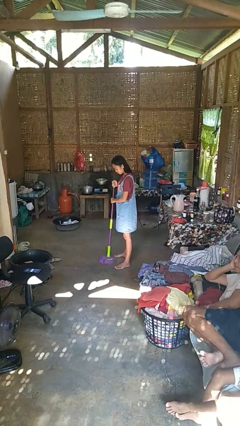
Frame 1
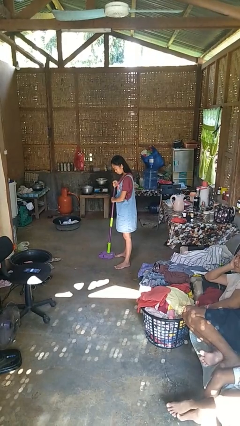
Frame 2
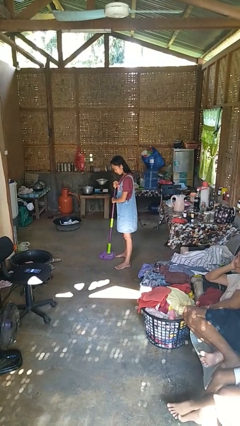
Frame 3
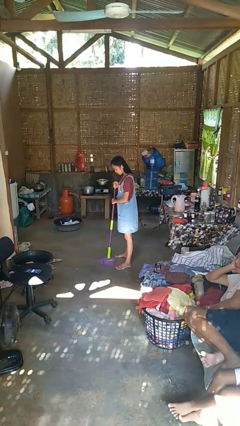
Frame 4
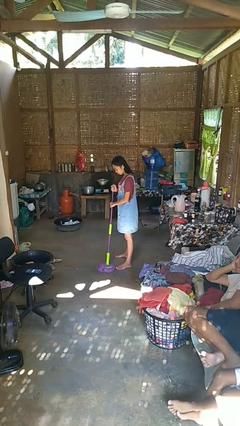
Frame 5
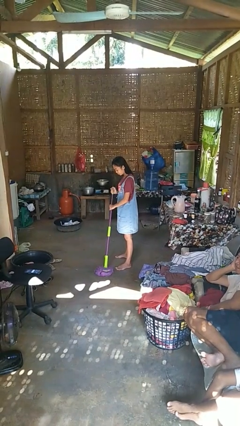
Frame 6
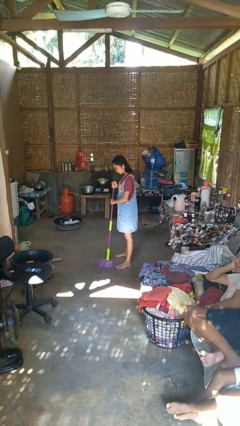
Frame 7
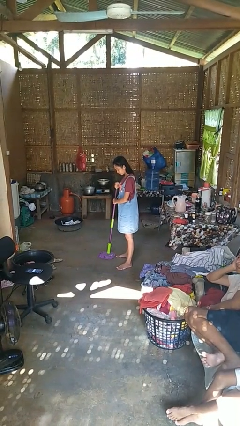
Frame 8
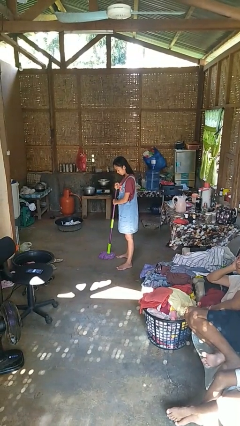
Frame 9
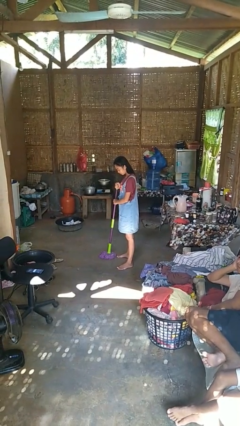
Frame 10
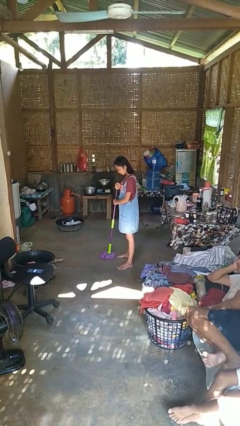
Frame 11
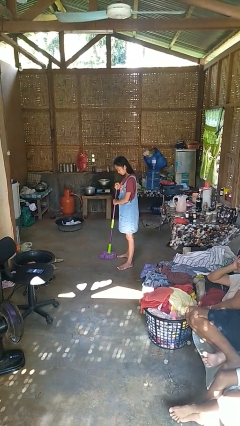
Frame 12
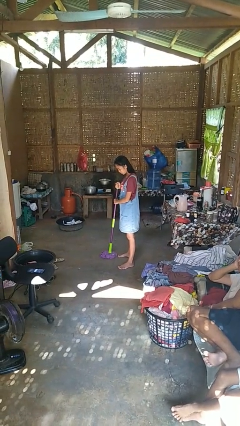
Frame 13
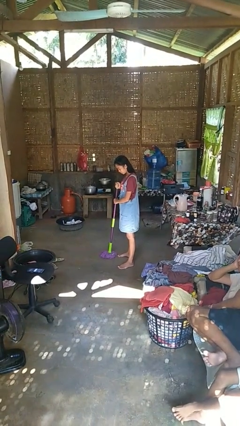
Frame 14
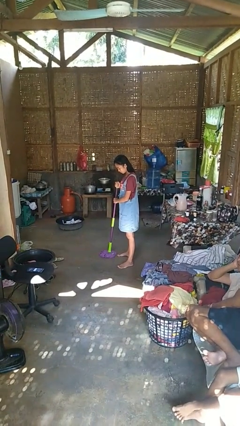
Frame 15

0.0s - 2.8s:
person mops

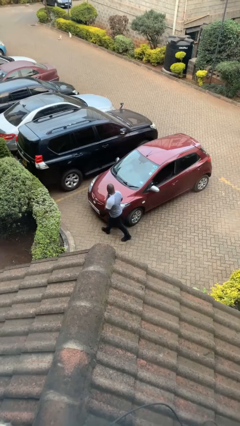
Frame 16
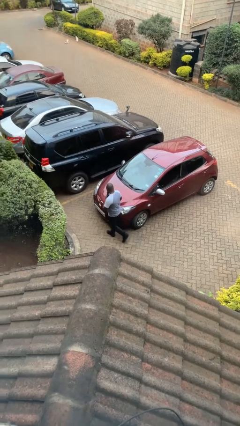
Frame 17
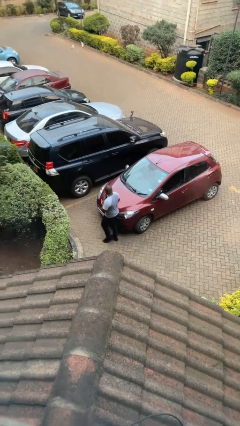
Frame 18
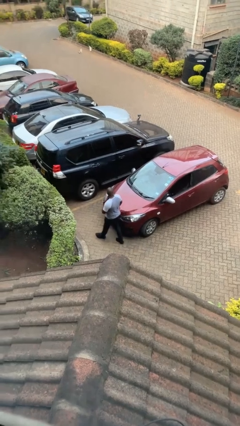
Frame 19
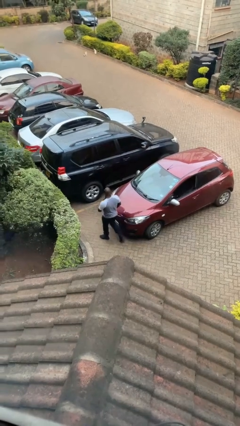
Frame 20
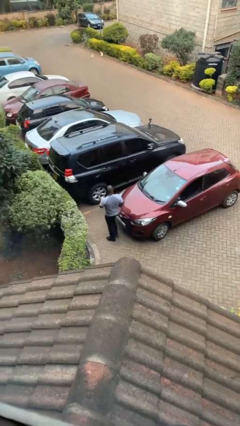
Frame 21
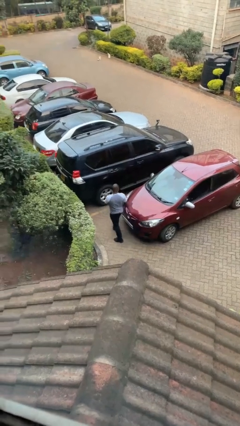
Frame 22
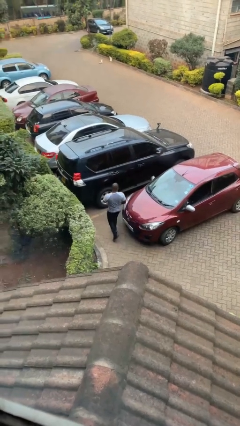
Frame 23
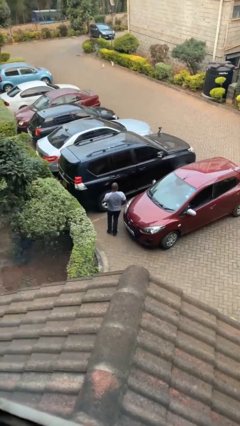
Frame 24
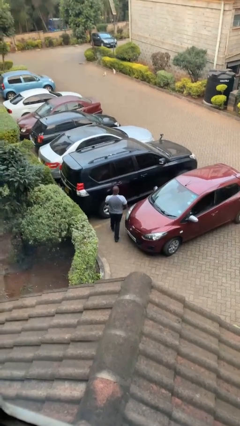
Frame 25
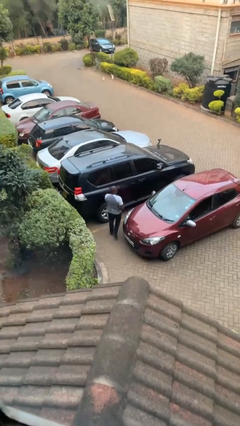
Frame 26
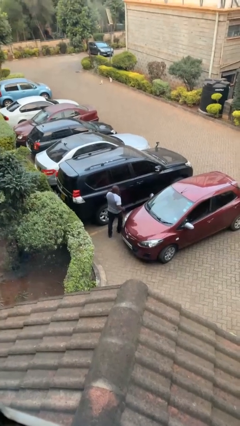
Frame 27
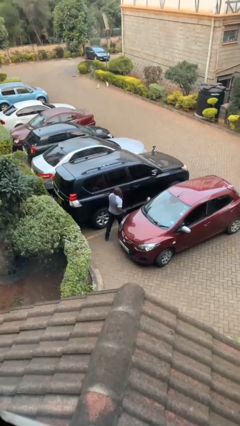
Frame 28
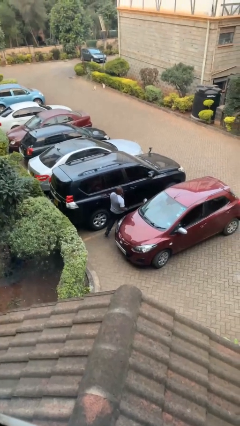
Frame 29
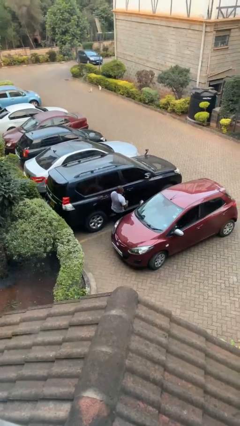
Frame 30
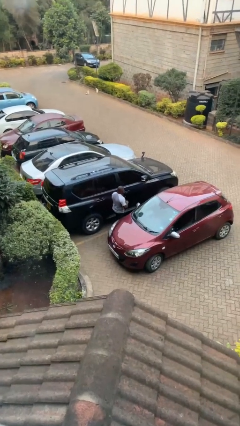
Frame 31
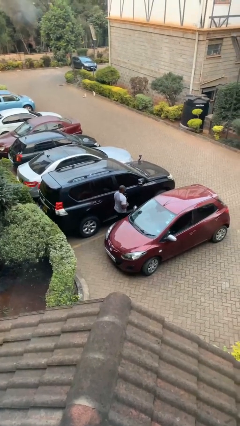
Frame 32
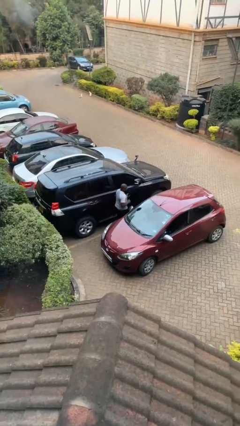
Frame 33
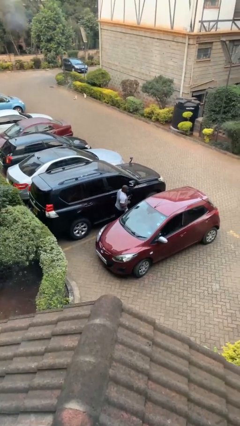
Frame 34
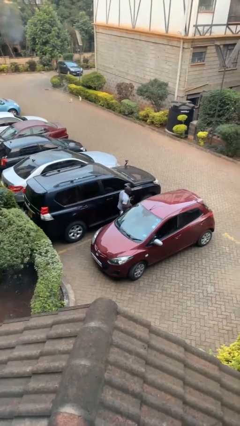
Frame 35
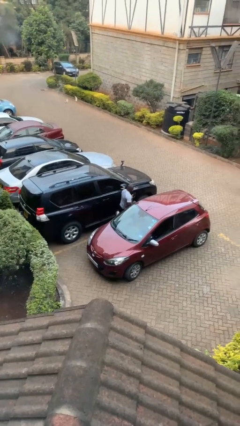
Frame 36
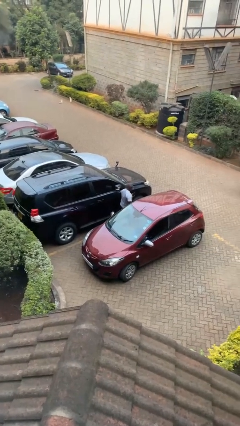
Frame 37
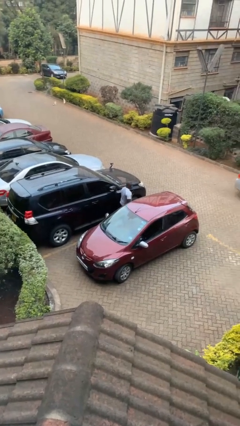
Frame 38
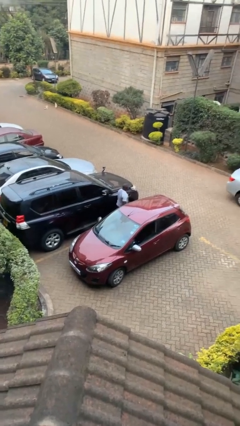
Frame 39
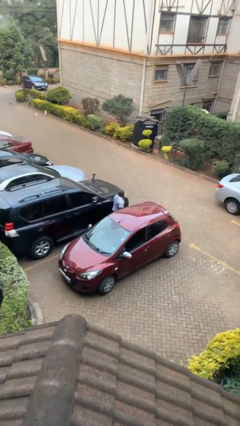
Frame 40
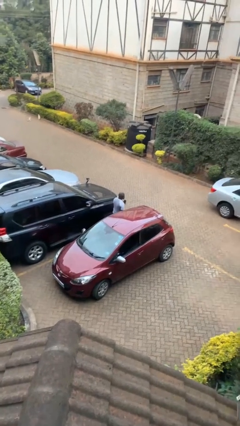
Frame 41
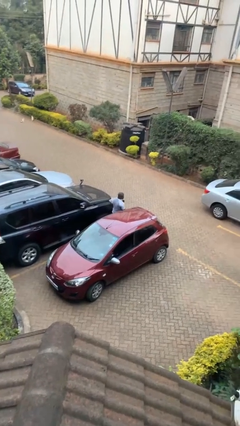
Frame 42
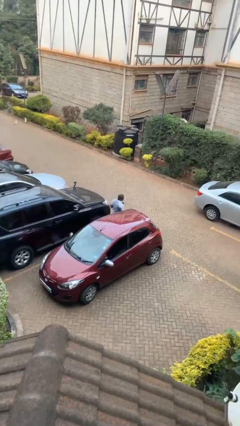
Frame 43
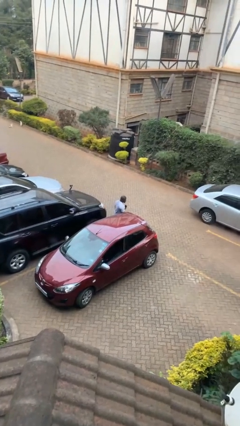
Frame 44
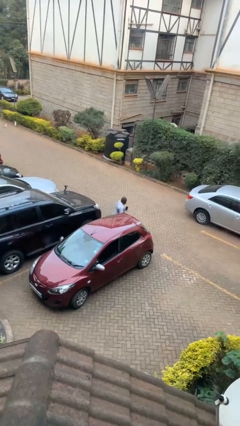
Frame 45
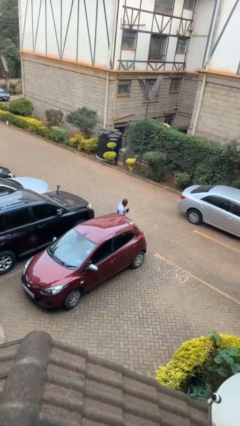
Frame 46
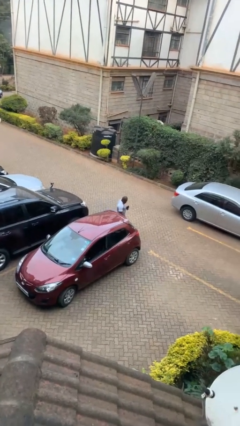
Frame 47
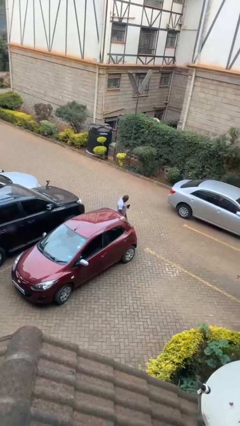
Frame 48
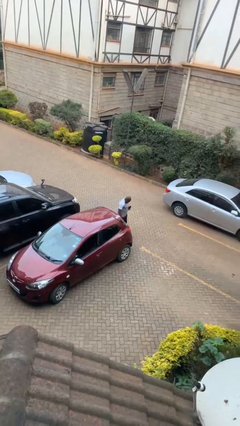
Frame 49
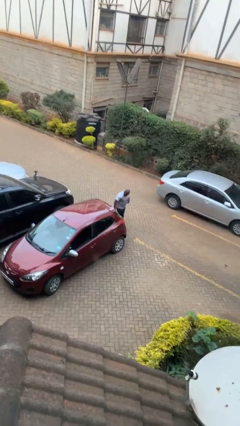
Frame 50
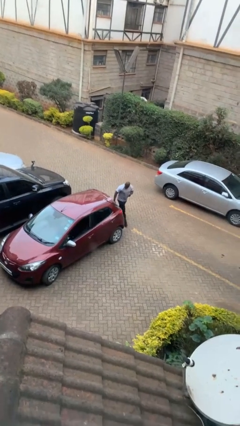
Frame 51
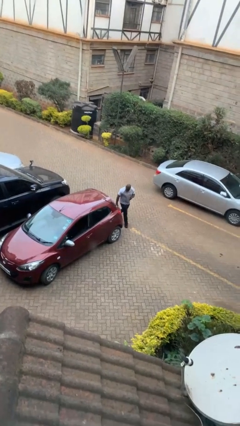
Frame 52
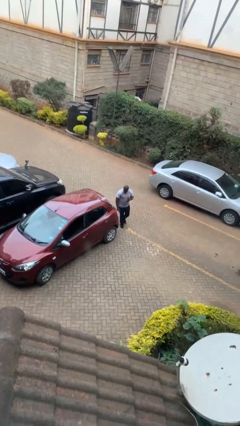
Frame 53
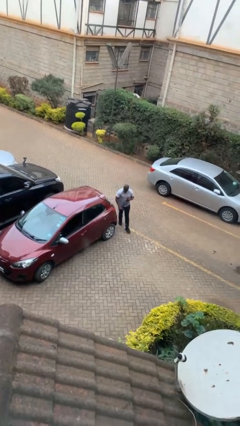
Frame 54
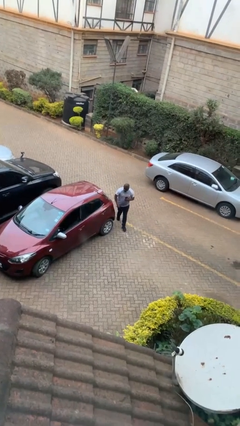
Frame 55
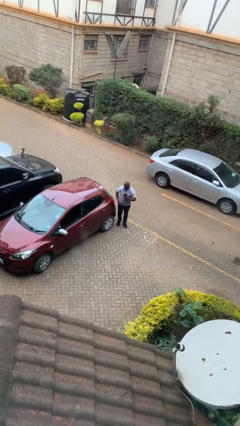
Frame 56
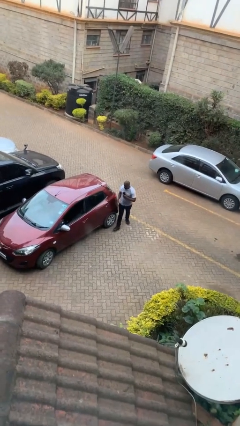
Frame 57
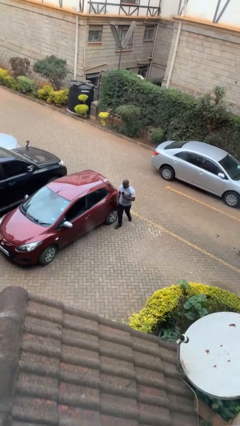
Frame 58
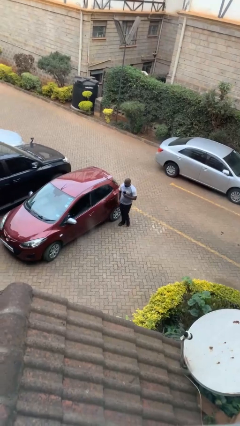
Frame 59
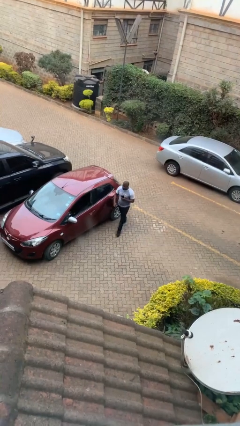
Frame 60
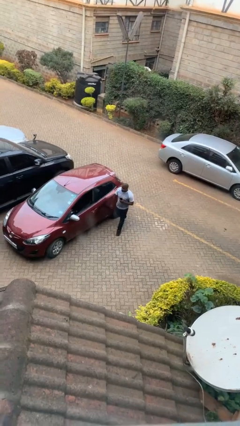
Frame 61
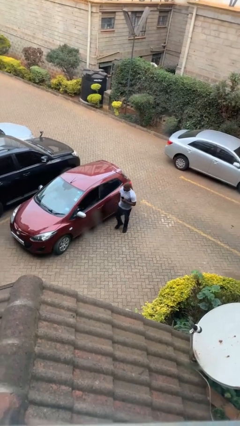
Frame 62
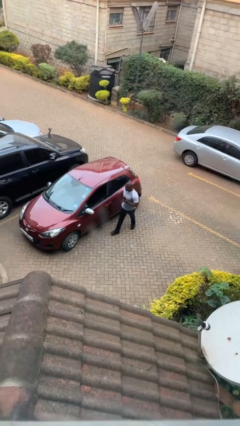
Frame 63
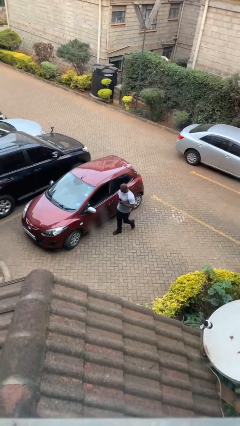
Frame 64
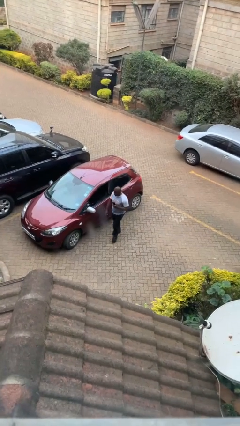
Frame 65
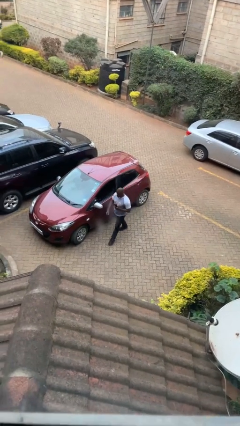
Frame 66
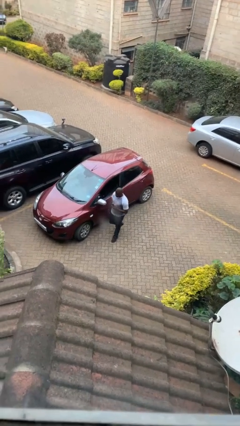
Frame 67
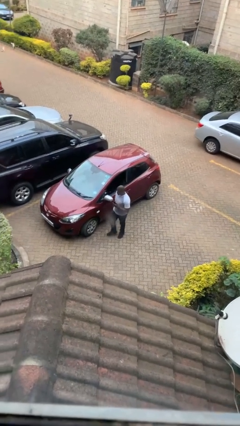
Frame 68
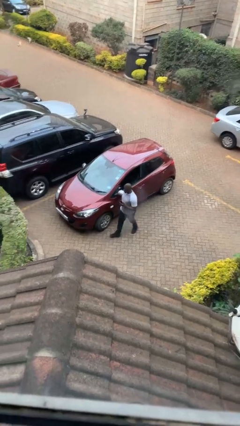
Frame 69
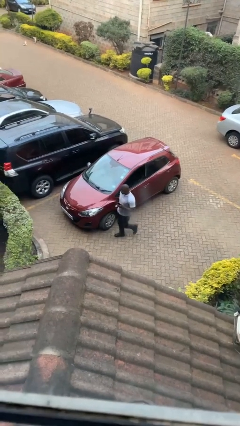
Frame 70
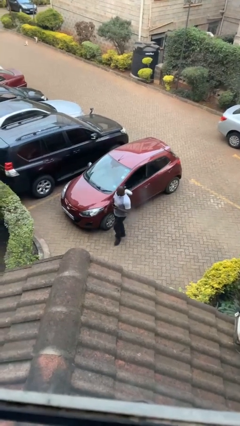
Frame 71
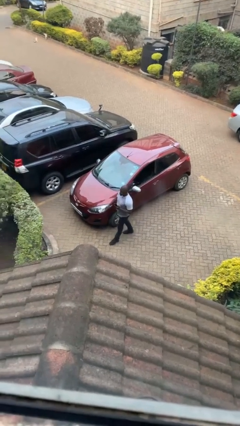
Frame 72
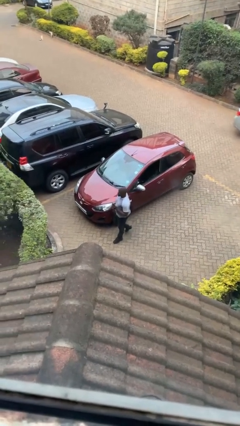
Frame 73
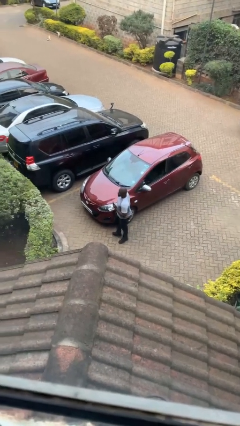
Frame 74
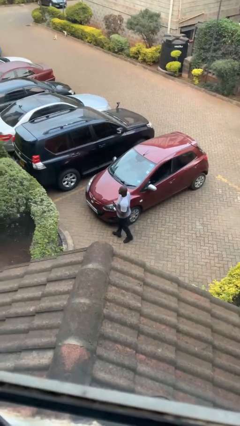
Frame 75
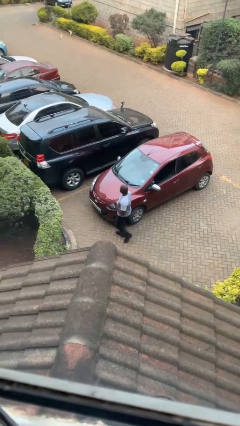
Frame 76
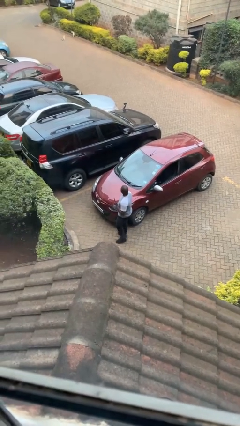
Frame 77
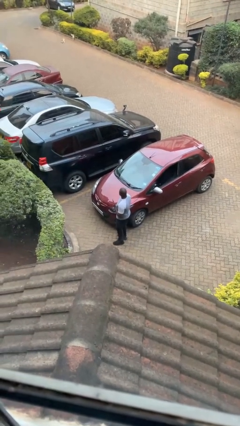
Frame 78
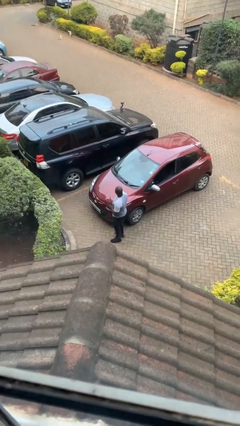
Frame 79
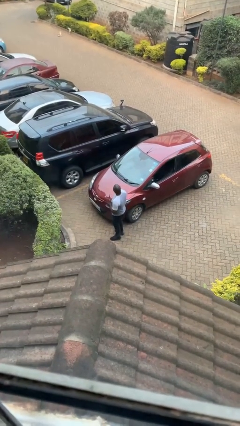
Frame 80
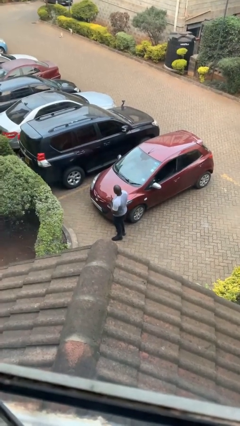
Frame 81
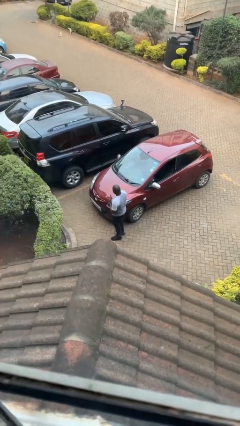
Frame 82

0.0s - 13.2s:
person walks around car

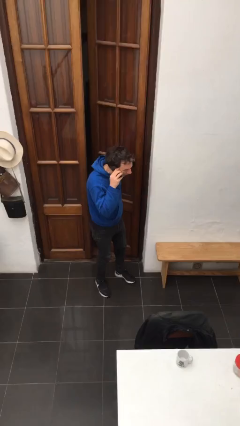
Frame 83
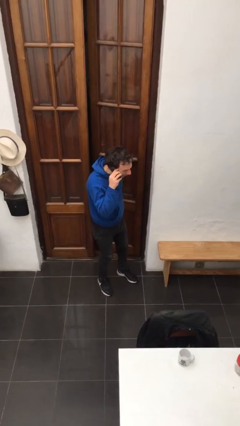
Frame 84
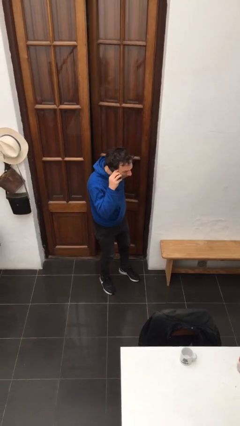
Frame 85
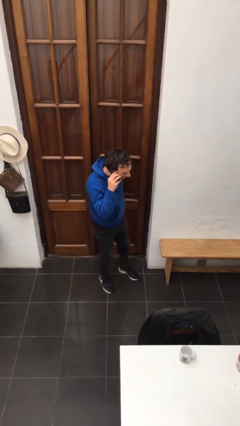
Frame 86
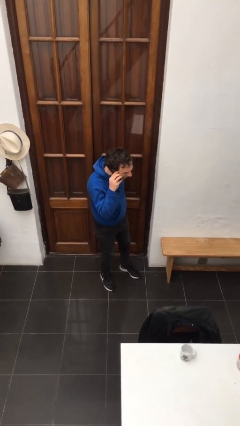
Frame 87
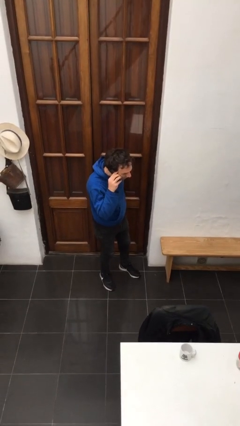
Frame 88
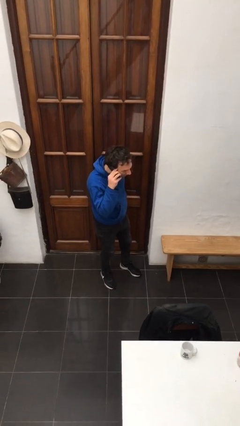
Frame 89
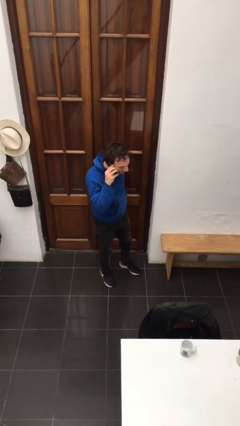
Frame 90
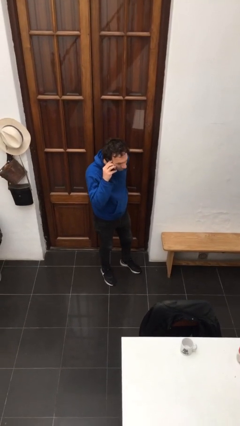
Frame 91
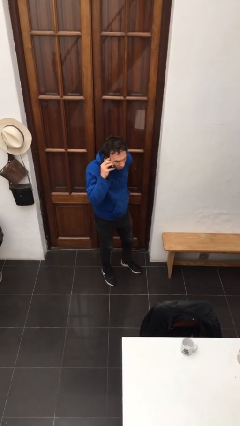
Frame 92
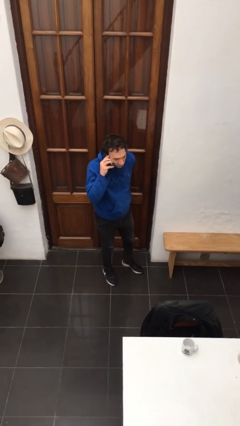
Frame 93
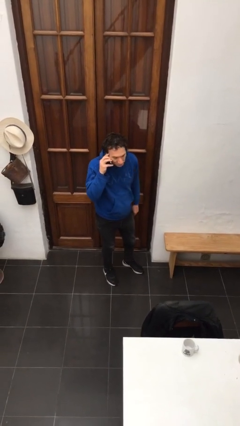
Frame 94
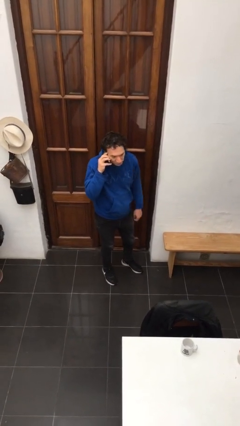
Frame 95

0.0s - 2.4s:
person closes facility door
